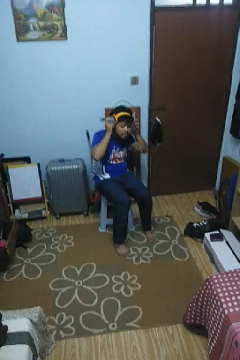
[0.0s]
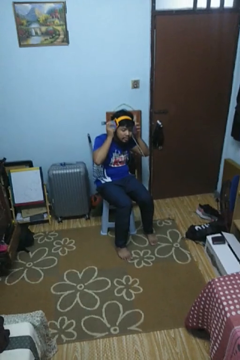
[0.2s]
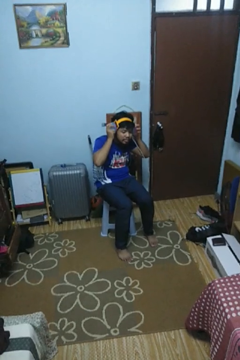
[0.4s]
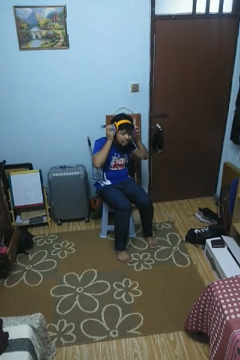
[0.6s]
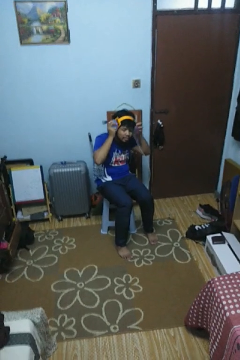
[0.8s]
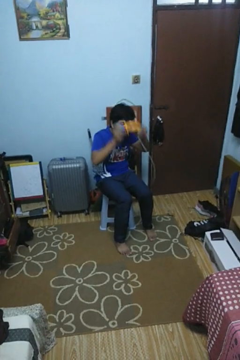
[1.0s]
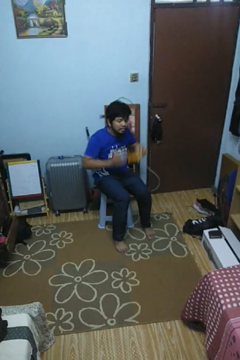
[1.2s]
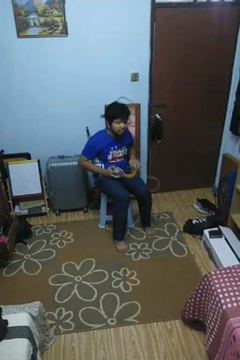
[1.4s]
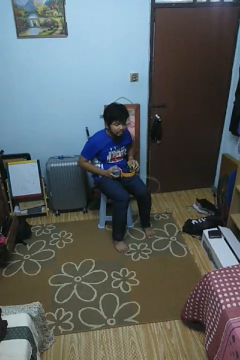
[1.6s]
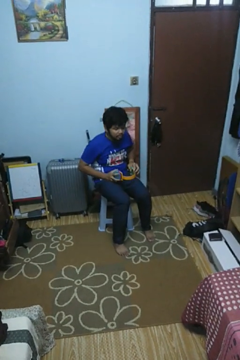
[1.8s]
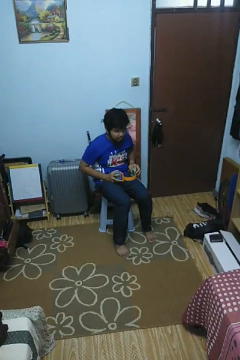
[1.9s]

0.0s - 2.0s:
person takes off headphones

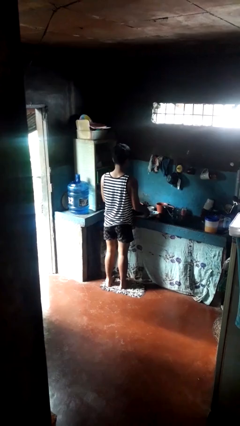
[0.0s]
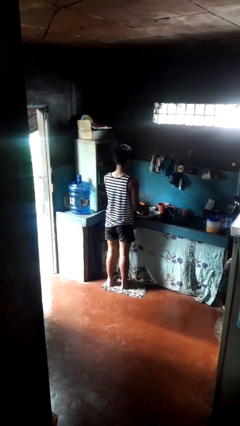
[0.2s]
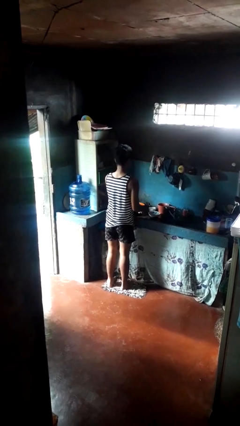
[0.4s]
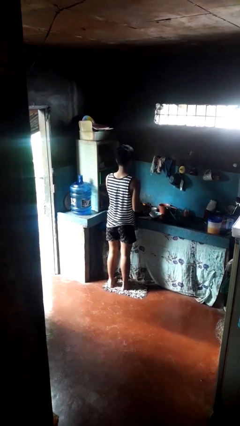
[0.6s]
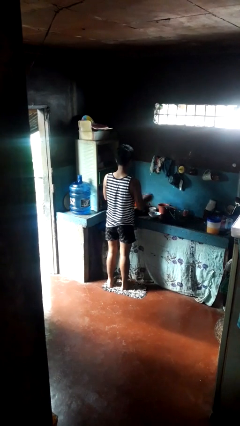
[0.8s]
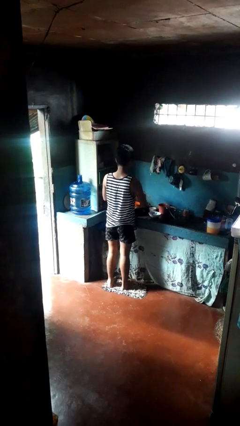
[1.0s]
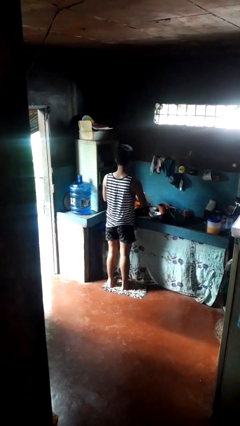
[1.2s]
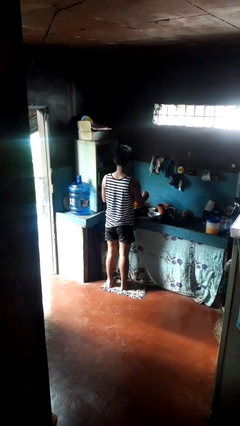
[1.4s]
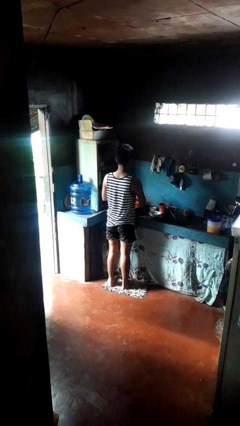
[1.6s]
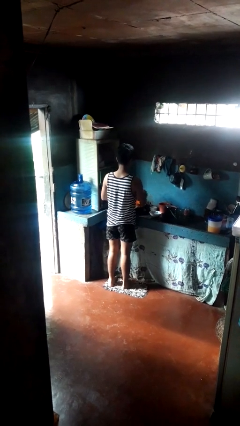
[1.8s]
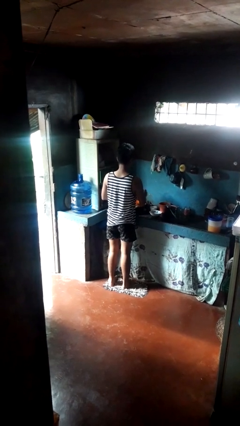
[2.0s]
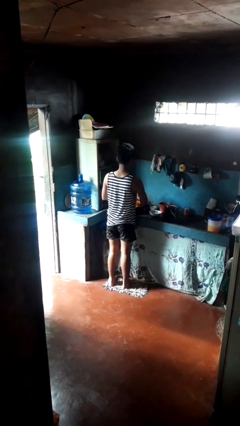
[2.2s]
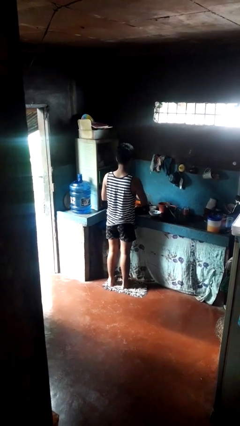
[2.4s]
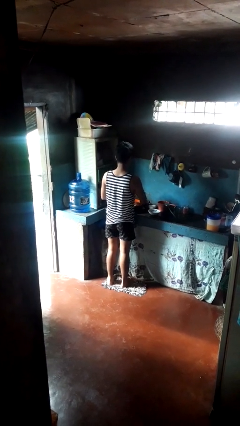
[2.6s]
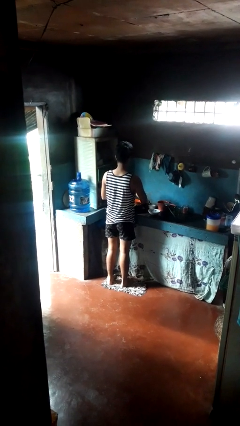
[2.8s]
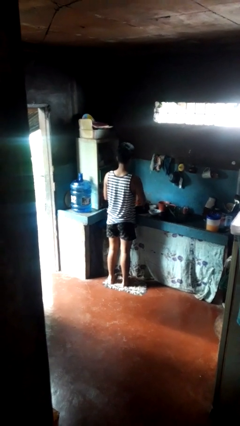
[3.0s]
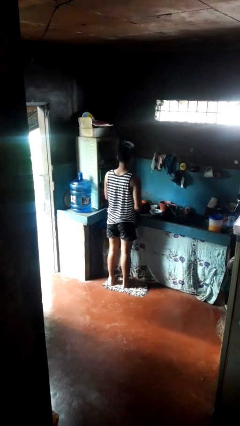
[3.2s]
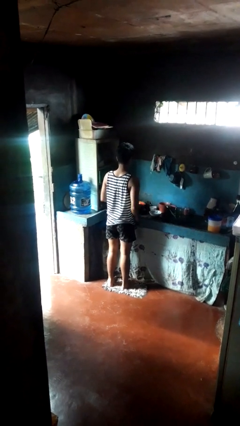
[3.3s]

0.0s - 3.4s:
person washes dish

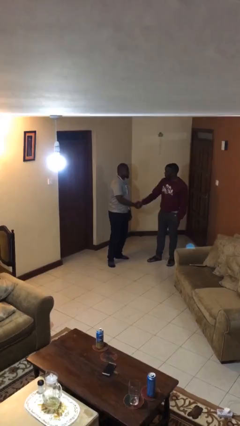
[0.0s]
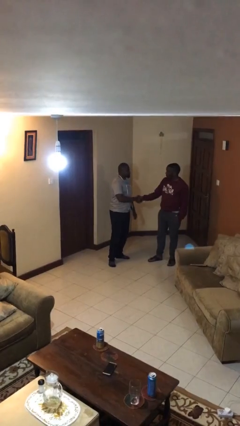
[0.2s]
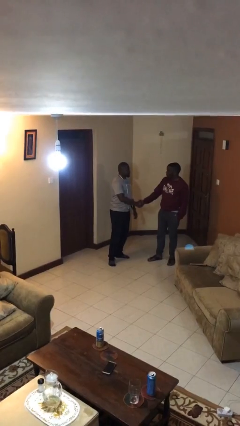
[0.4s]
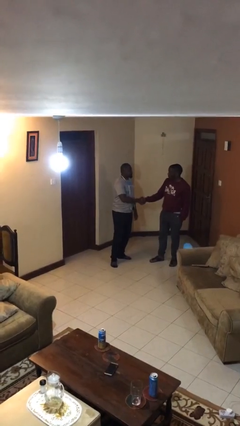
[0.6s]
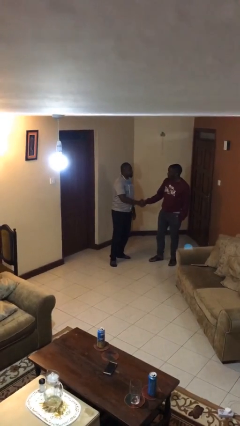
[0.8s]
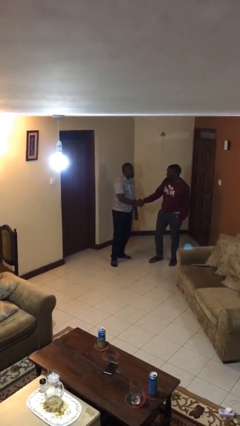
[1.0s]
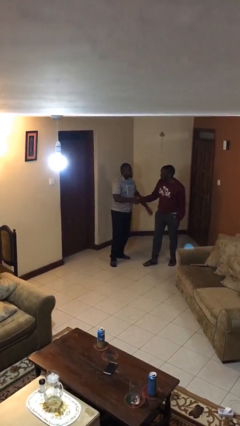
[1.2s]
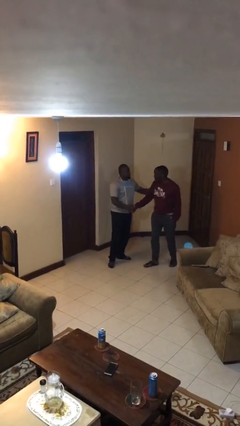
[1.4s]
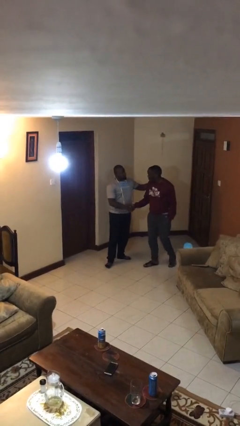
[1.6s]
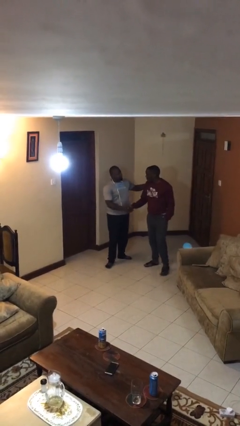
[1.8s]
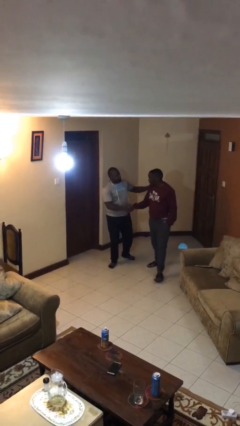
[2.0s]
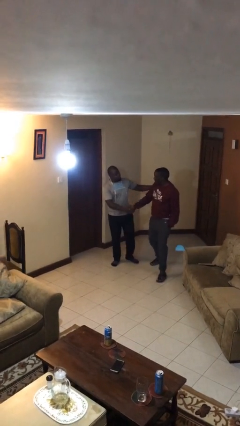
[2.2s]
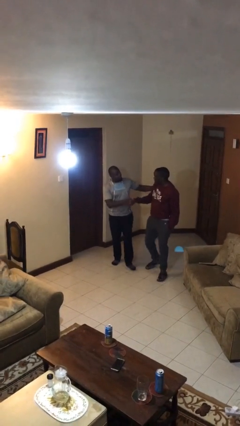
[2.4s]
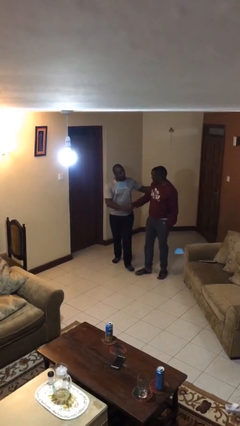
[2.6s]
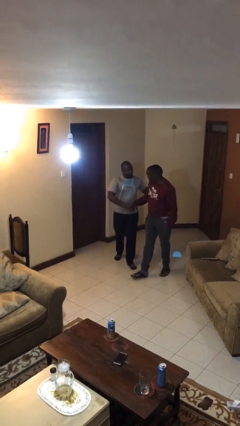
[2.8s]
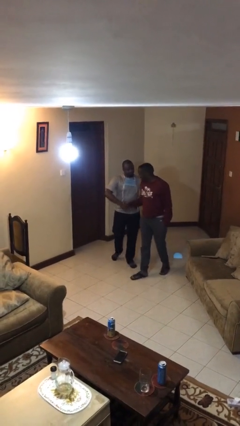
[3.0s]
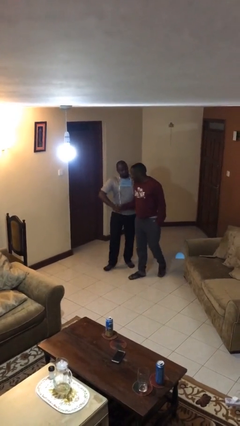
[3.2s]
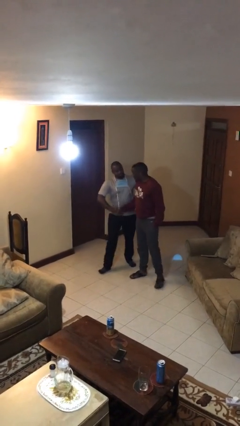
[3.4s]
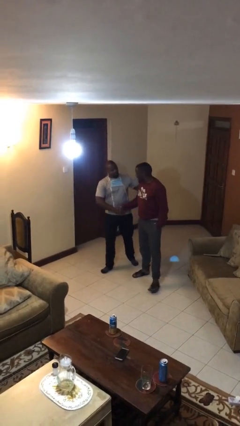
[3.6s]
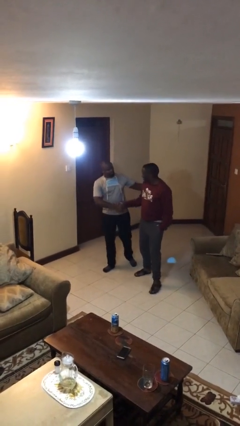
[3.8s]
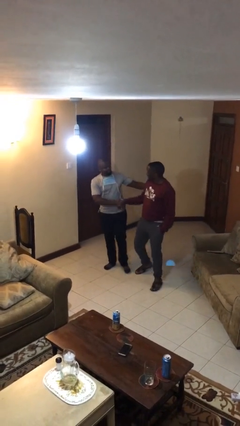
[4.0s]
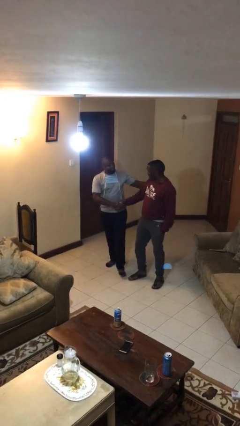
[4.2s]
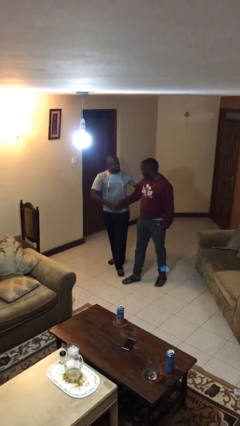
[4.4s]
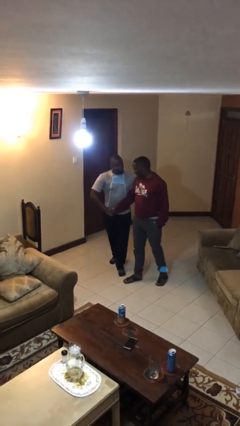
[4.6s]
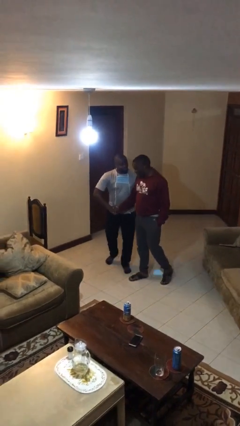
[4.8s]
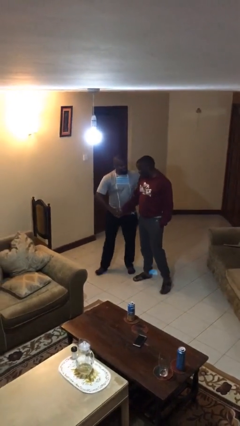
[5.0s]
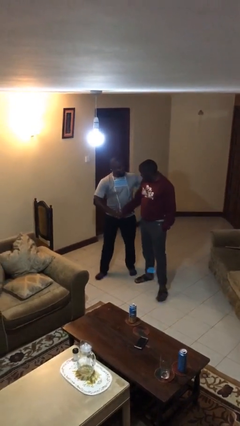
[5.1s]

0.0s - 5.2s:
person holds hand

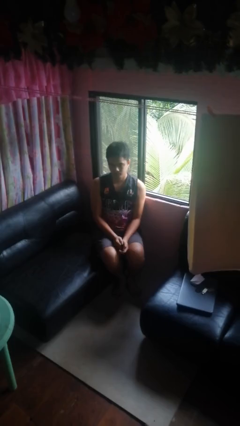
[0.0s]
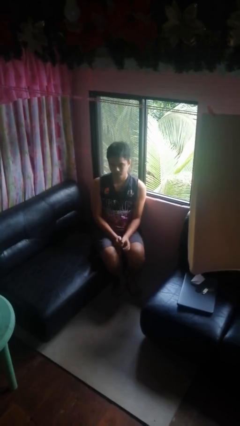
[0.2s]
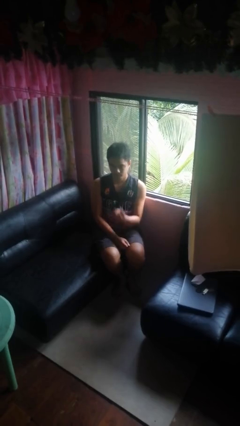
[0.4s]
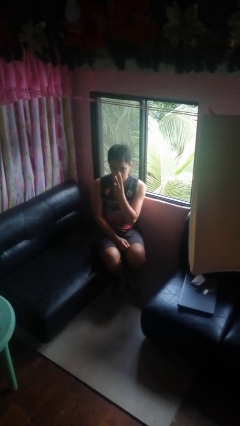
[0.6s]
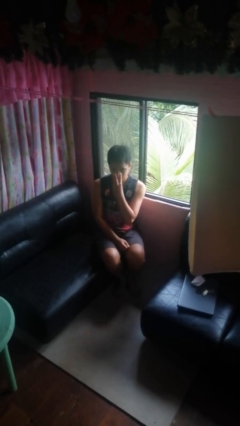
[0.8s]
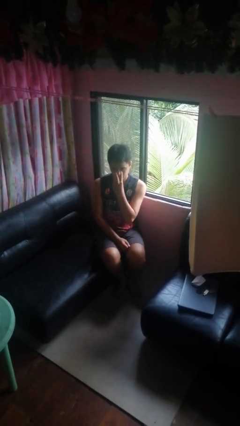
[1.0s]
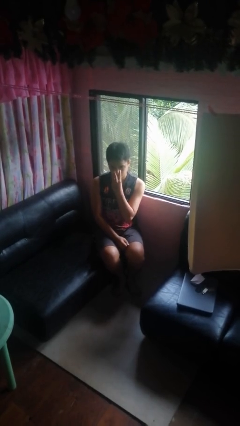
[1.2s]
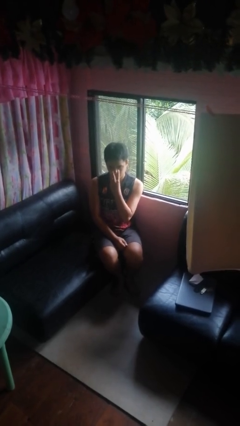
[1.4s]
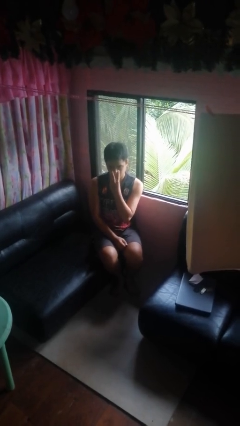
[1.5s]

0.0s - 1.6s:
person gestures watch closely

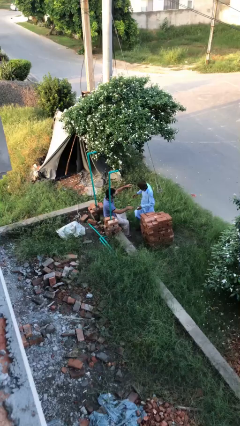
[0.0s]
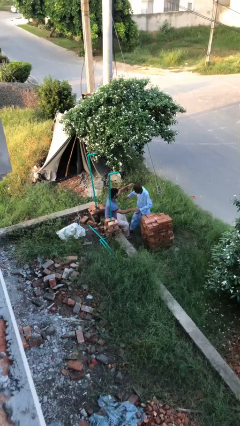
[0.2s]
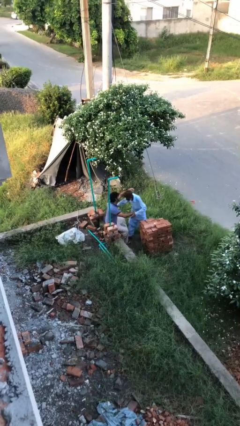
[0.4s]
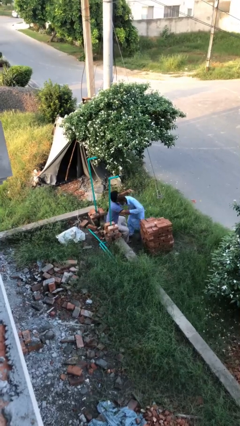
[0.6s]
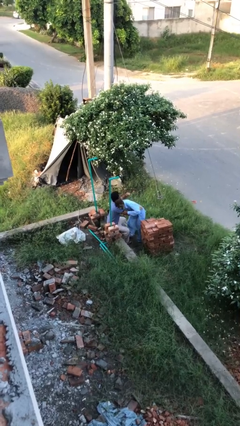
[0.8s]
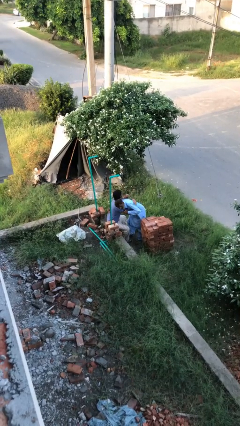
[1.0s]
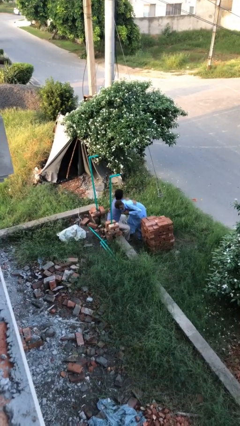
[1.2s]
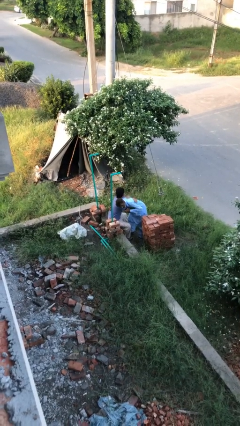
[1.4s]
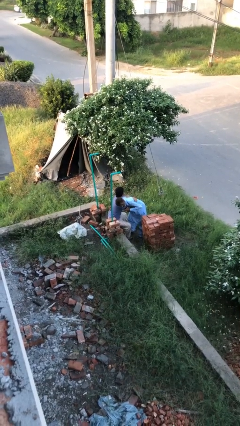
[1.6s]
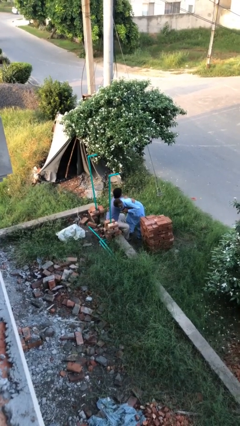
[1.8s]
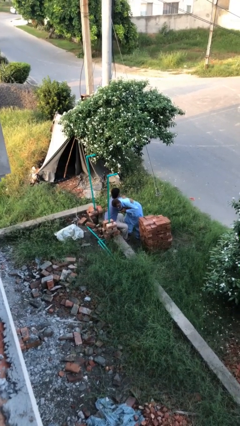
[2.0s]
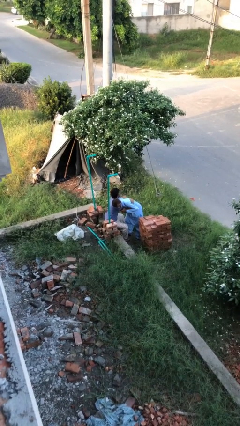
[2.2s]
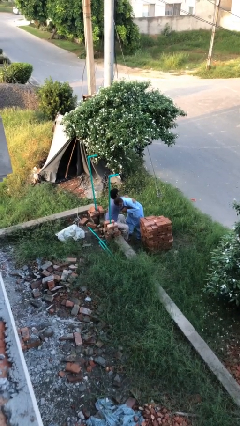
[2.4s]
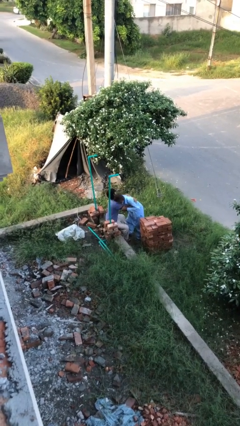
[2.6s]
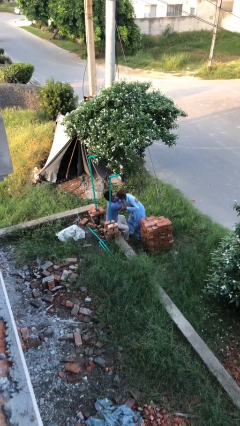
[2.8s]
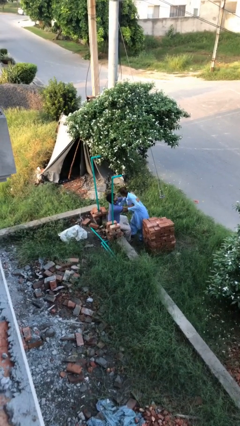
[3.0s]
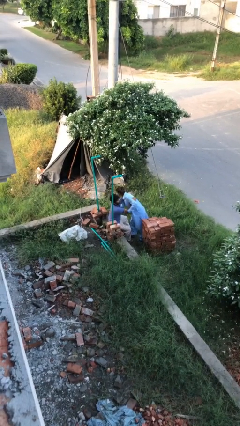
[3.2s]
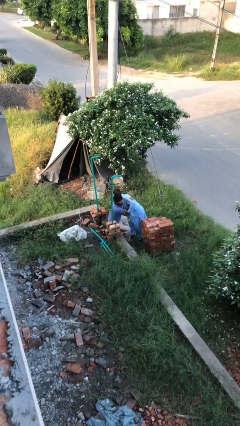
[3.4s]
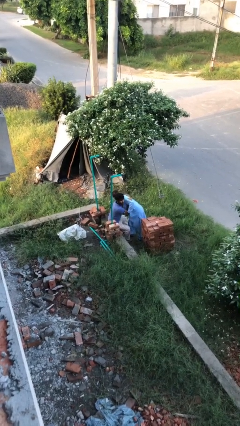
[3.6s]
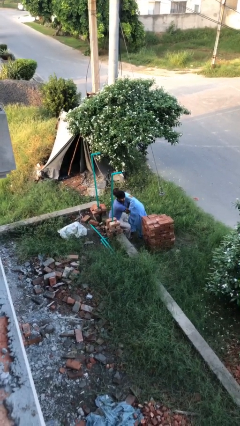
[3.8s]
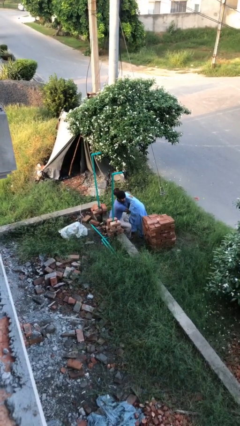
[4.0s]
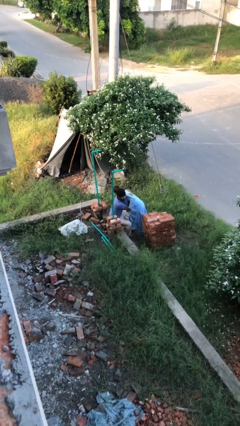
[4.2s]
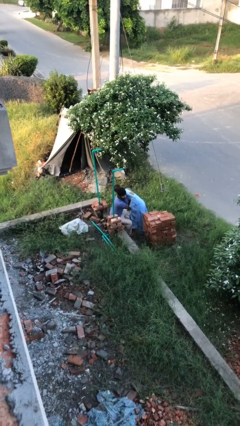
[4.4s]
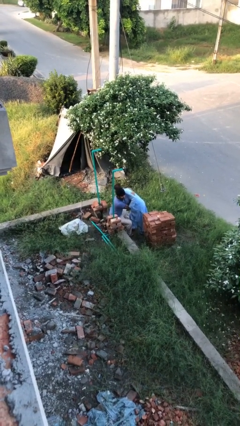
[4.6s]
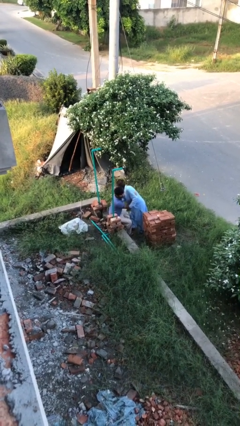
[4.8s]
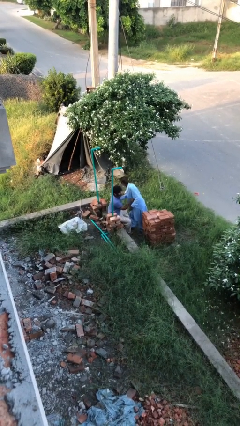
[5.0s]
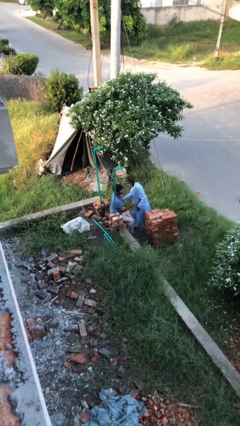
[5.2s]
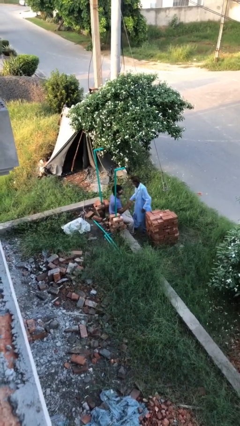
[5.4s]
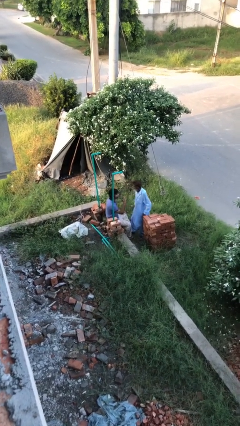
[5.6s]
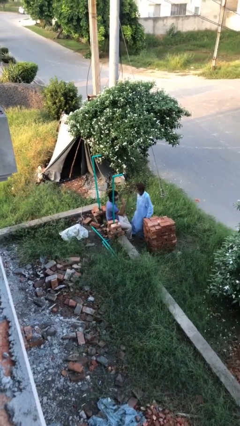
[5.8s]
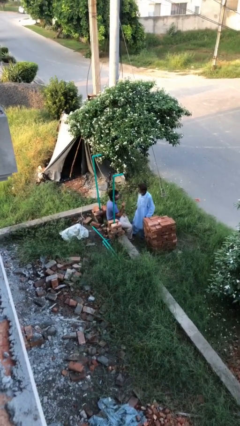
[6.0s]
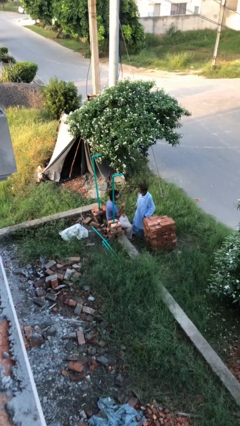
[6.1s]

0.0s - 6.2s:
person embraces person
